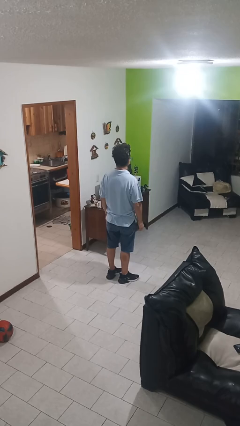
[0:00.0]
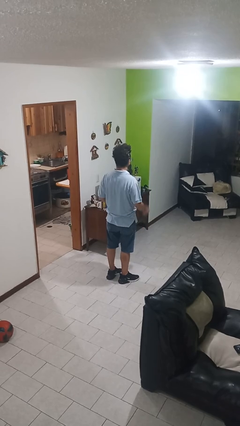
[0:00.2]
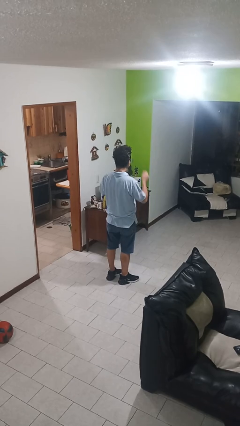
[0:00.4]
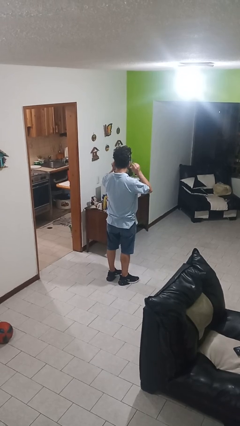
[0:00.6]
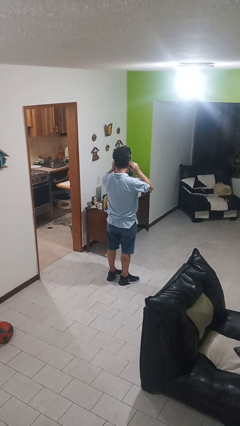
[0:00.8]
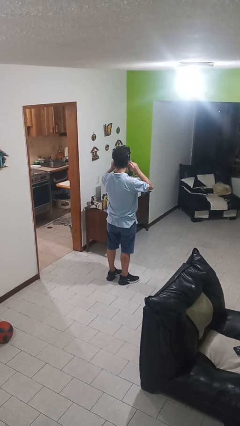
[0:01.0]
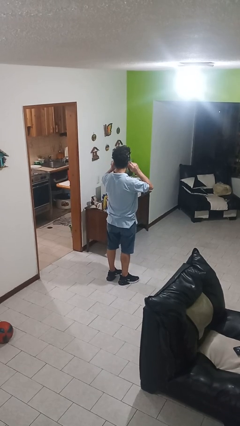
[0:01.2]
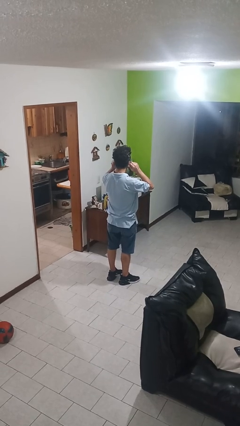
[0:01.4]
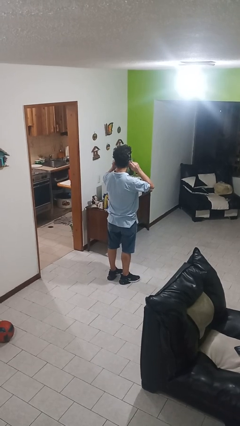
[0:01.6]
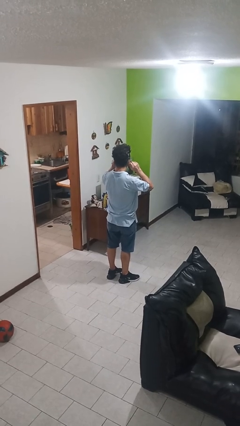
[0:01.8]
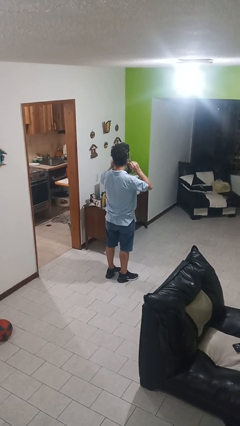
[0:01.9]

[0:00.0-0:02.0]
person touches earlobe

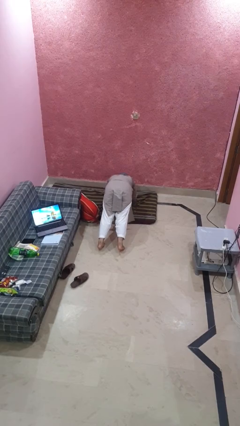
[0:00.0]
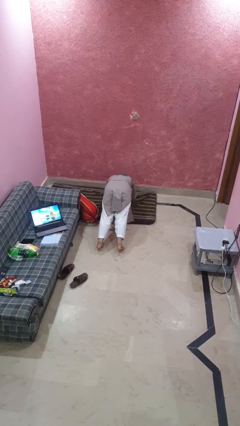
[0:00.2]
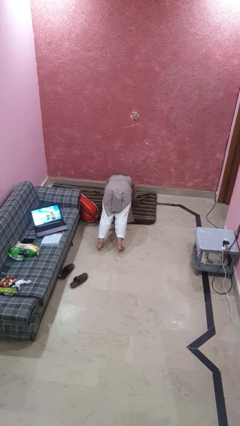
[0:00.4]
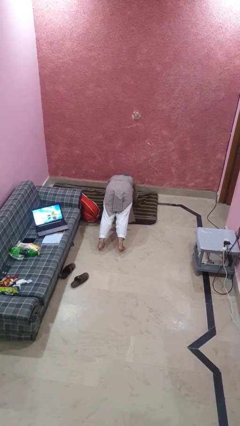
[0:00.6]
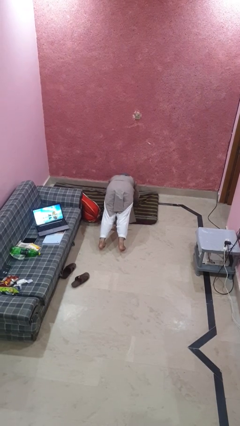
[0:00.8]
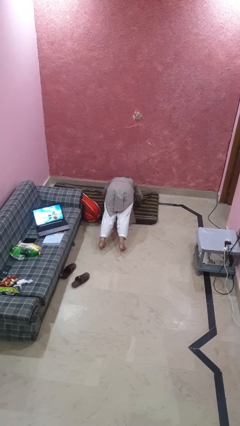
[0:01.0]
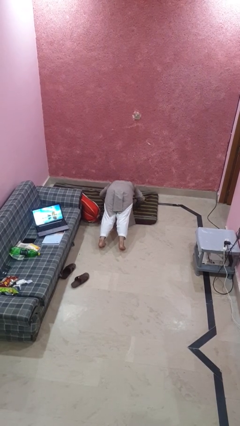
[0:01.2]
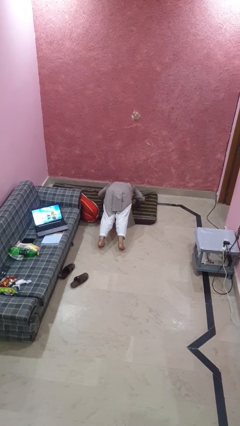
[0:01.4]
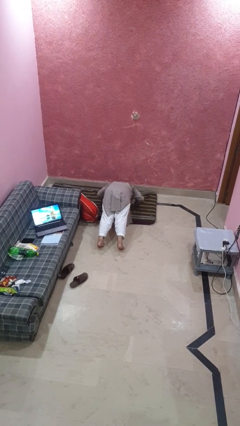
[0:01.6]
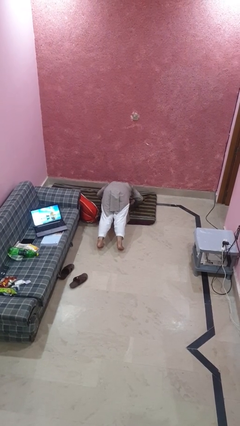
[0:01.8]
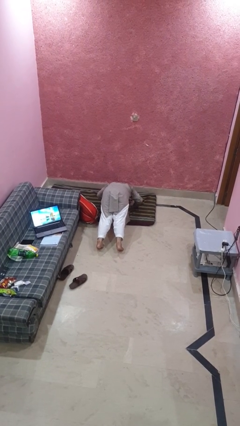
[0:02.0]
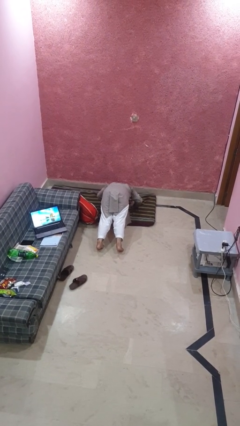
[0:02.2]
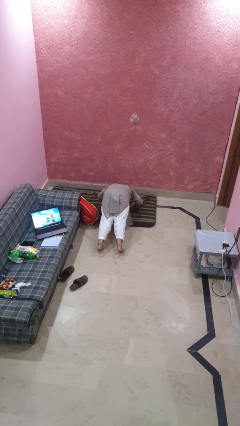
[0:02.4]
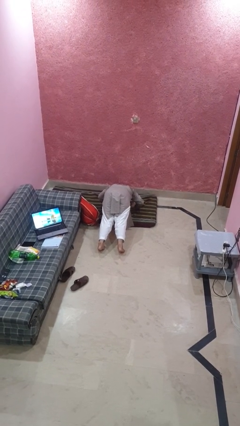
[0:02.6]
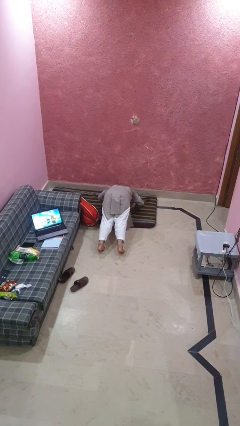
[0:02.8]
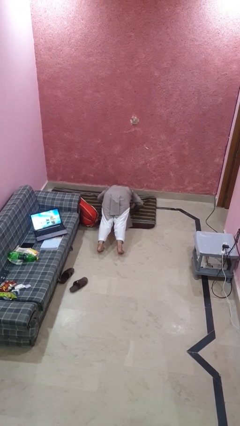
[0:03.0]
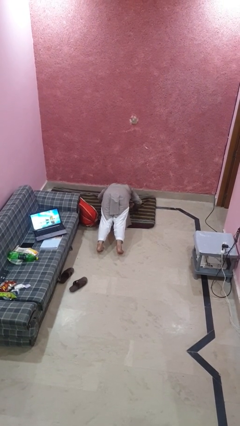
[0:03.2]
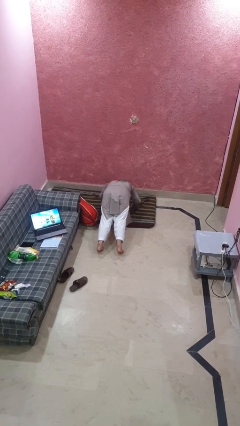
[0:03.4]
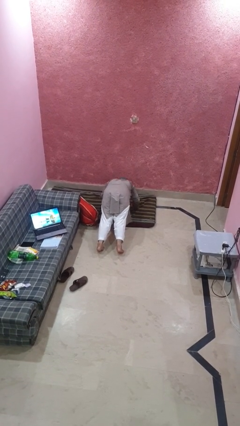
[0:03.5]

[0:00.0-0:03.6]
person exercises with pushup

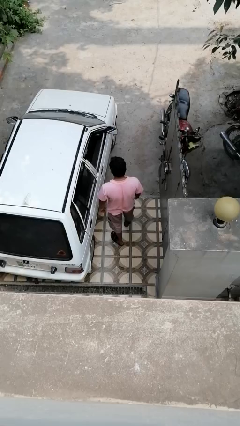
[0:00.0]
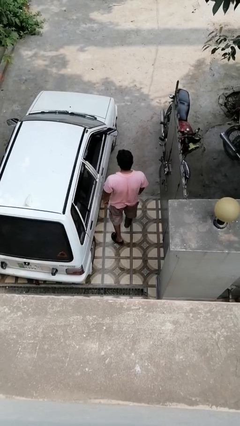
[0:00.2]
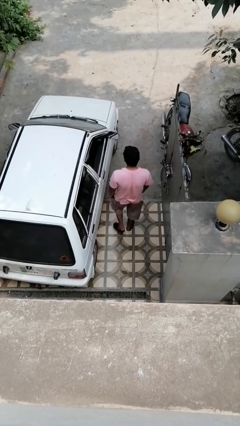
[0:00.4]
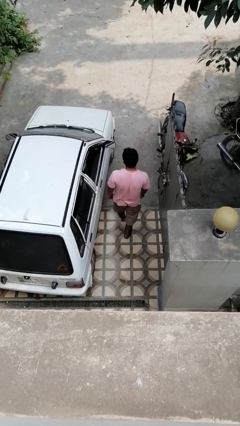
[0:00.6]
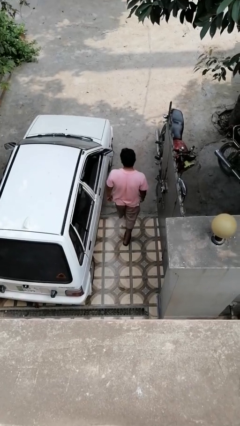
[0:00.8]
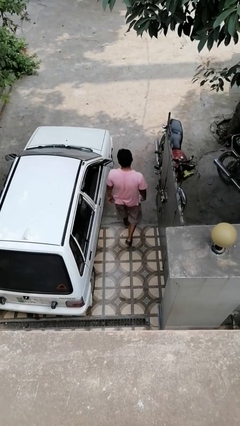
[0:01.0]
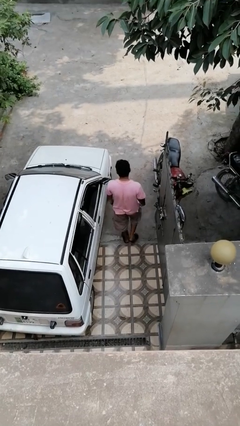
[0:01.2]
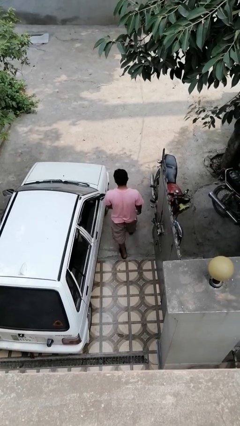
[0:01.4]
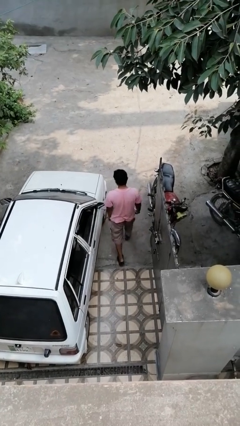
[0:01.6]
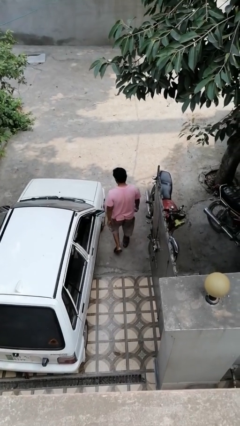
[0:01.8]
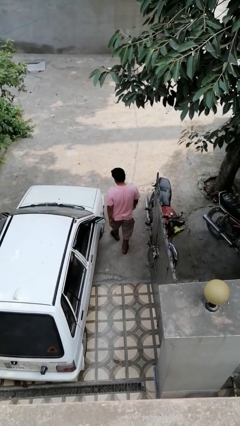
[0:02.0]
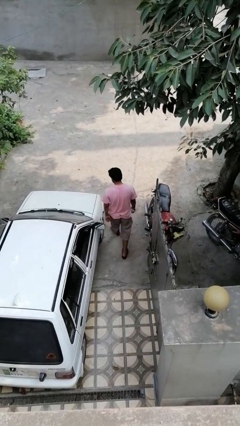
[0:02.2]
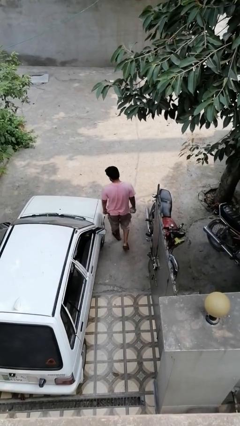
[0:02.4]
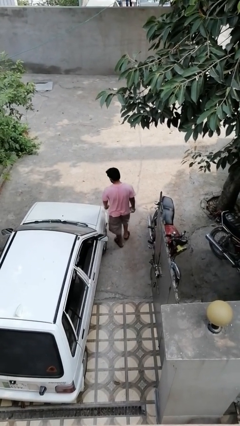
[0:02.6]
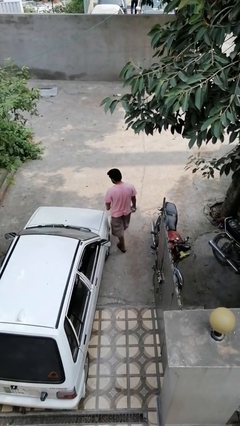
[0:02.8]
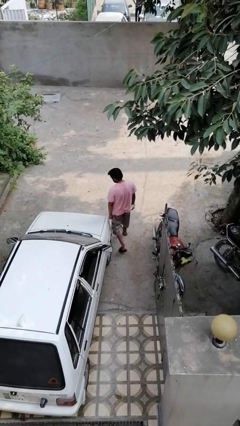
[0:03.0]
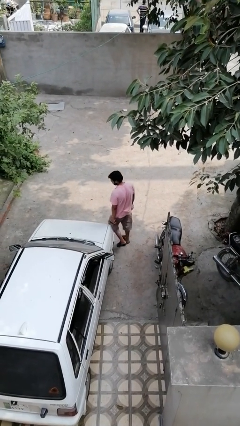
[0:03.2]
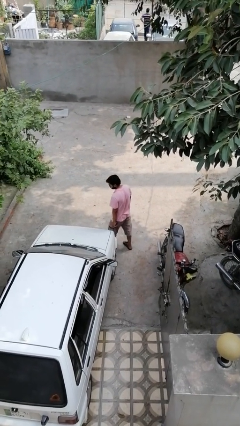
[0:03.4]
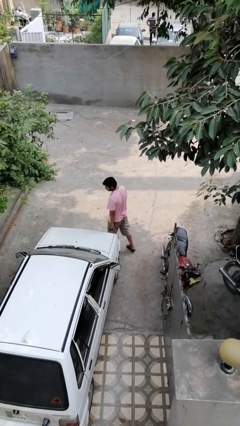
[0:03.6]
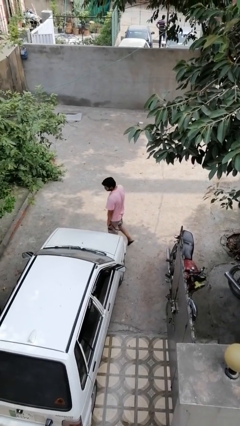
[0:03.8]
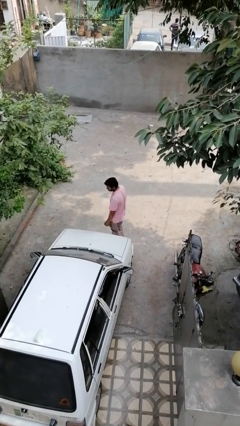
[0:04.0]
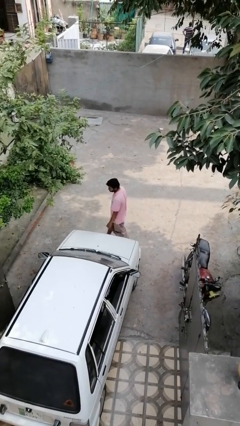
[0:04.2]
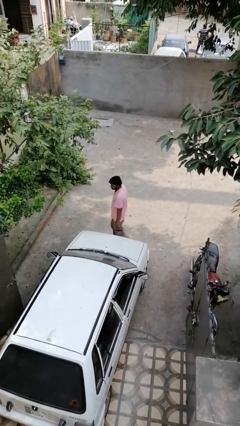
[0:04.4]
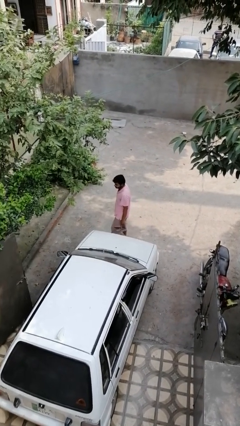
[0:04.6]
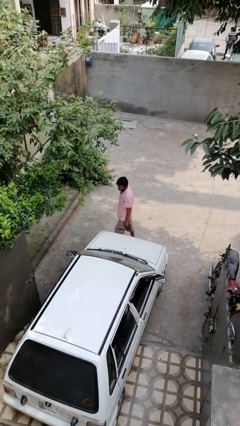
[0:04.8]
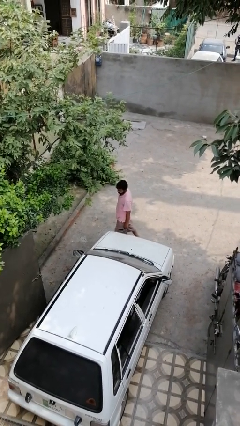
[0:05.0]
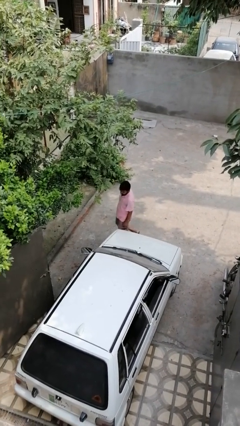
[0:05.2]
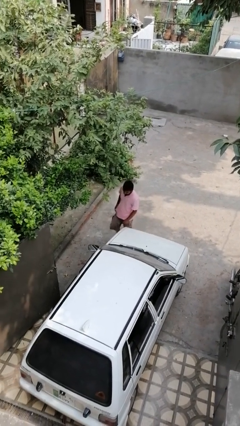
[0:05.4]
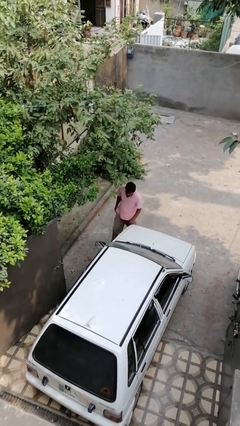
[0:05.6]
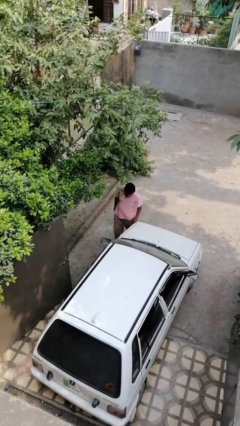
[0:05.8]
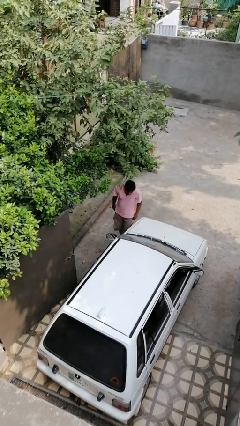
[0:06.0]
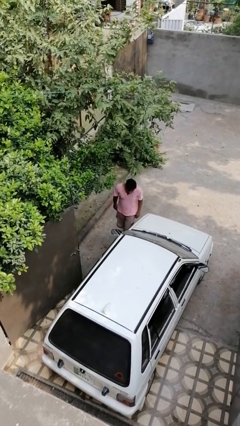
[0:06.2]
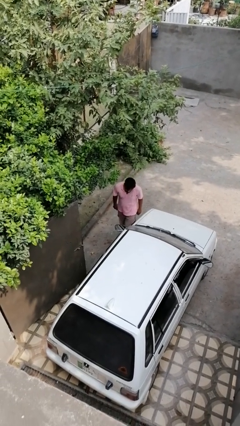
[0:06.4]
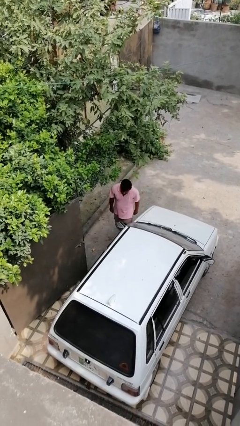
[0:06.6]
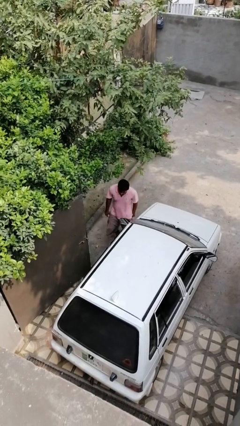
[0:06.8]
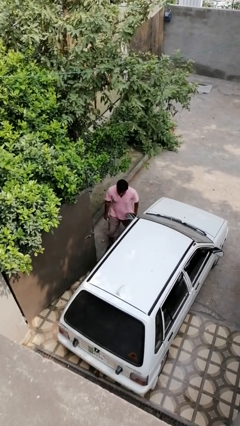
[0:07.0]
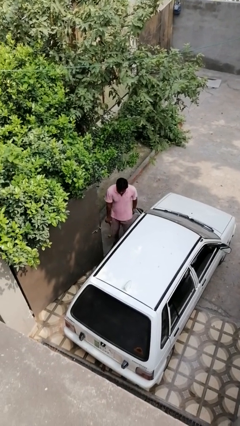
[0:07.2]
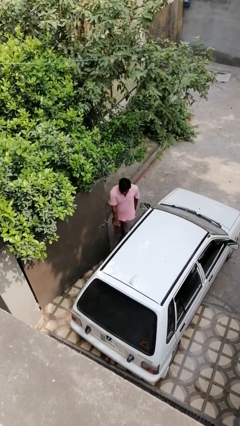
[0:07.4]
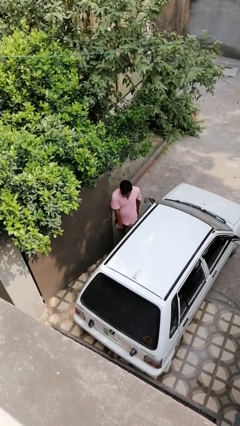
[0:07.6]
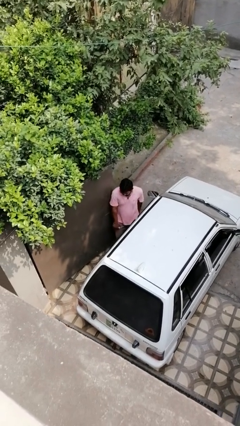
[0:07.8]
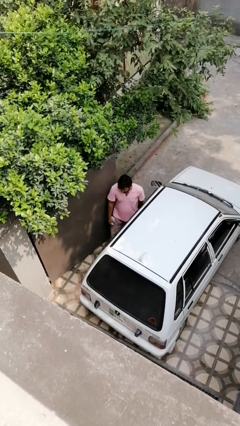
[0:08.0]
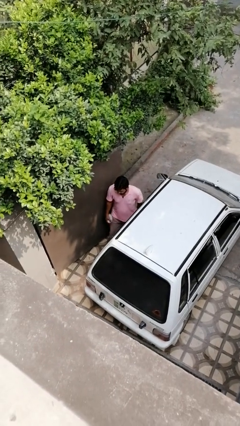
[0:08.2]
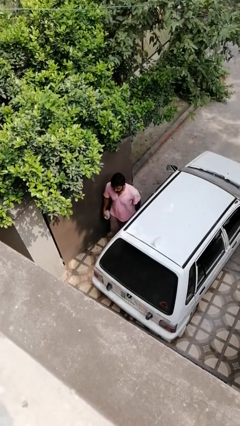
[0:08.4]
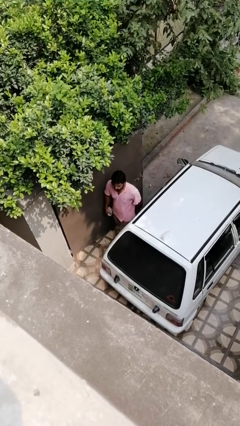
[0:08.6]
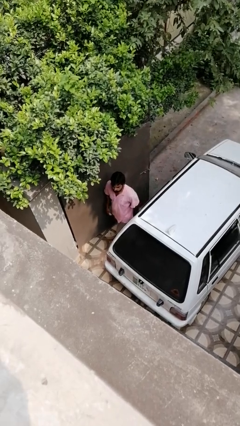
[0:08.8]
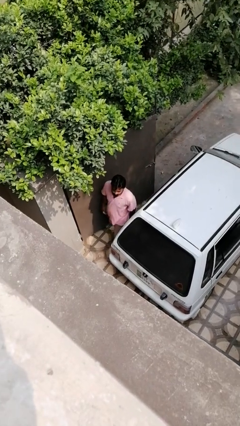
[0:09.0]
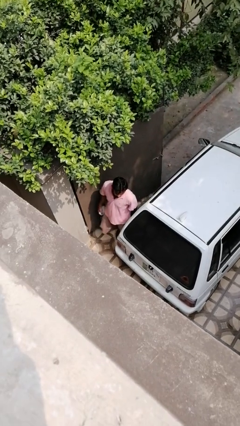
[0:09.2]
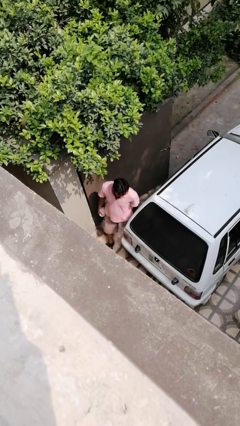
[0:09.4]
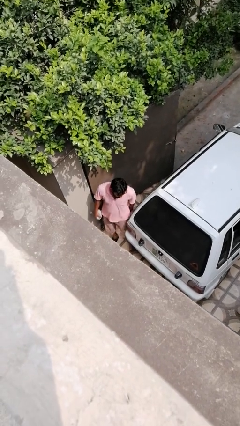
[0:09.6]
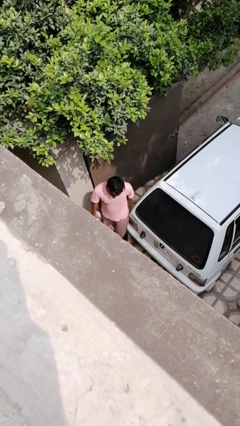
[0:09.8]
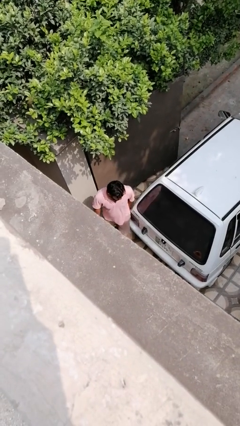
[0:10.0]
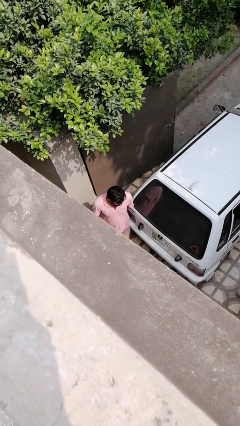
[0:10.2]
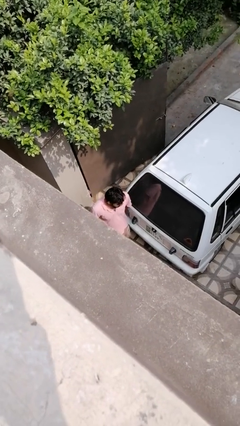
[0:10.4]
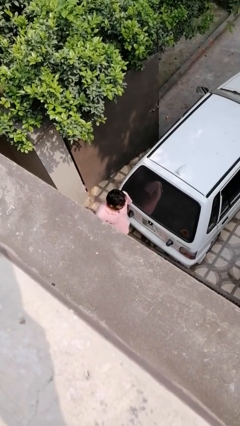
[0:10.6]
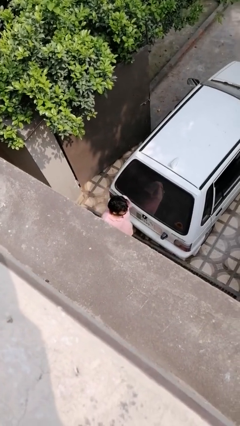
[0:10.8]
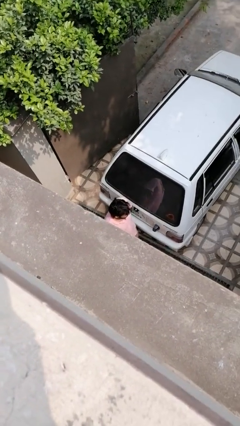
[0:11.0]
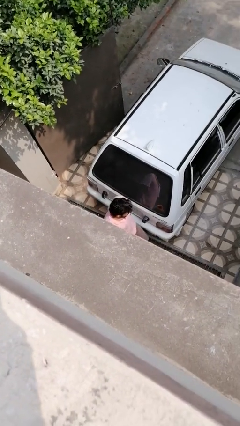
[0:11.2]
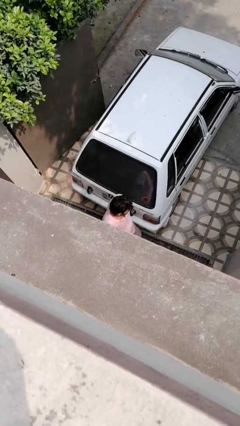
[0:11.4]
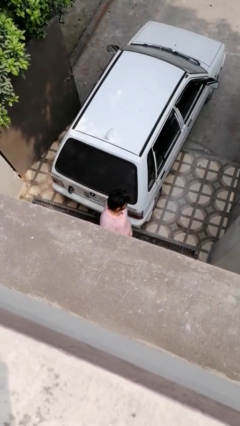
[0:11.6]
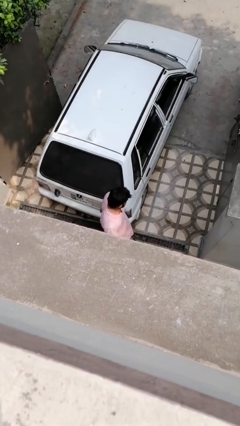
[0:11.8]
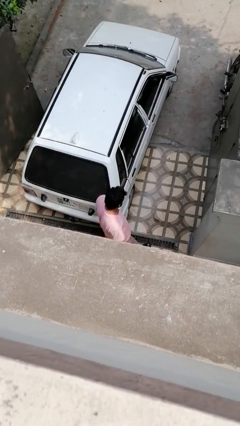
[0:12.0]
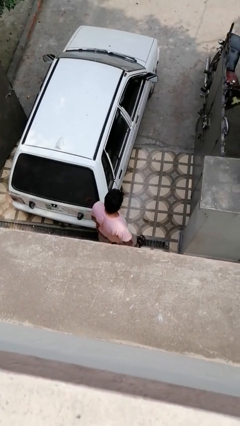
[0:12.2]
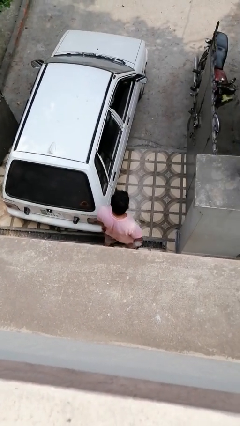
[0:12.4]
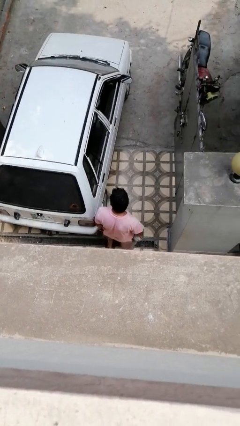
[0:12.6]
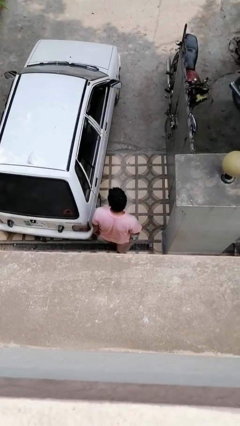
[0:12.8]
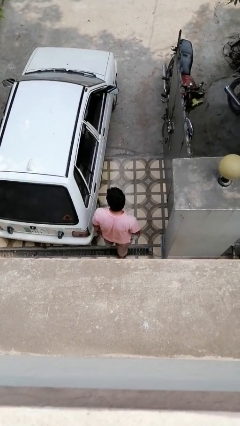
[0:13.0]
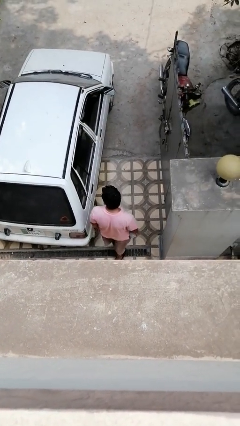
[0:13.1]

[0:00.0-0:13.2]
person walks around car
